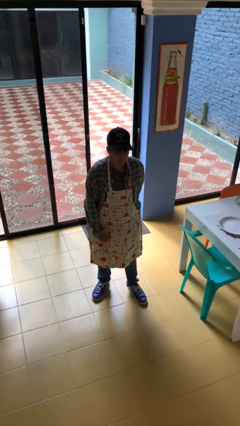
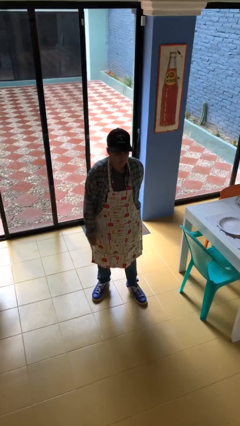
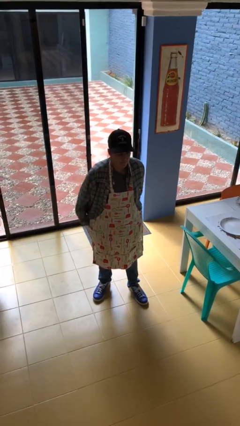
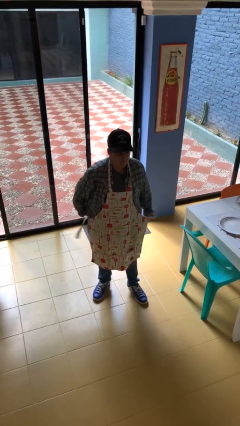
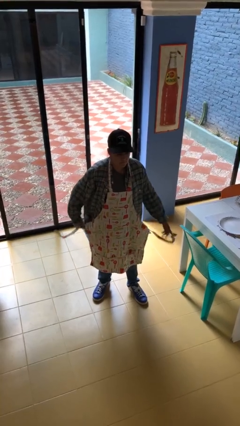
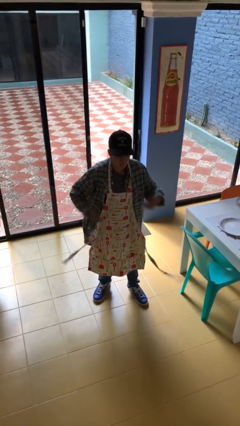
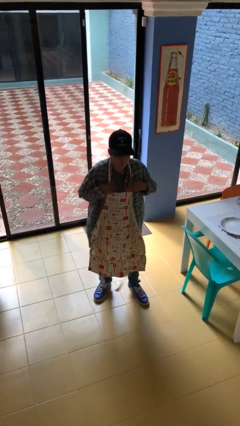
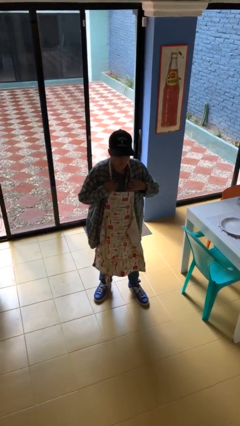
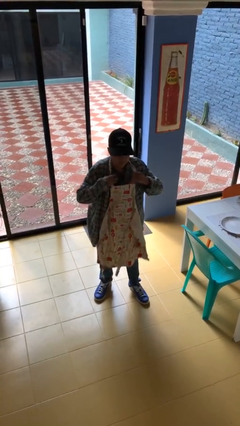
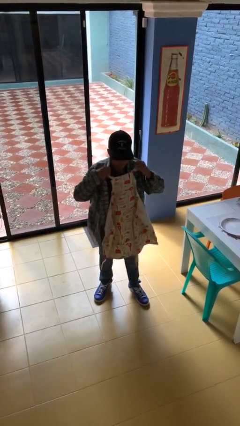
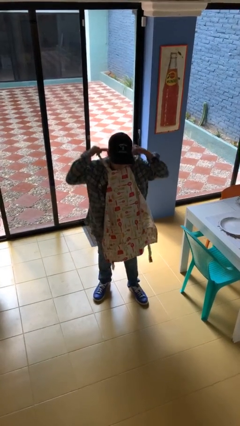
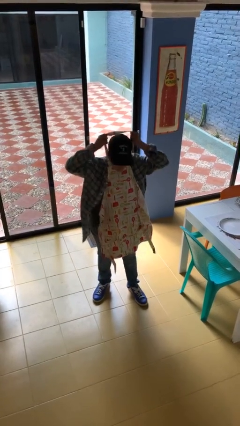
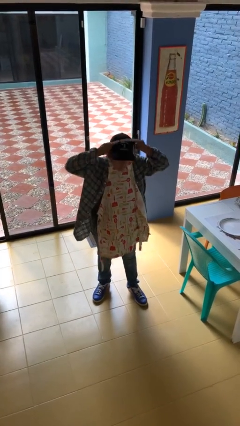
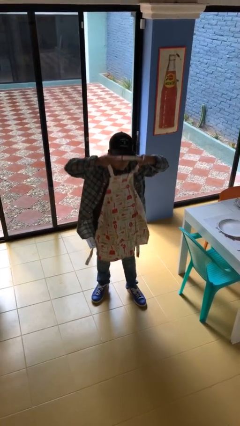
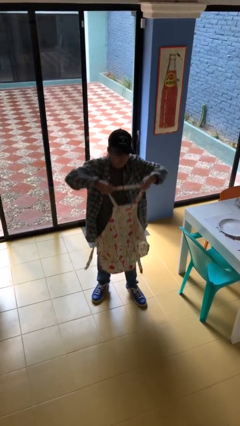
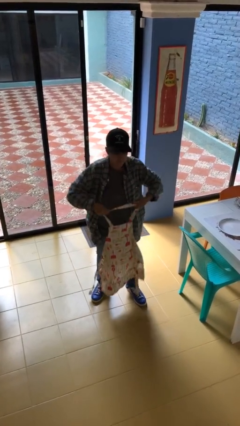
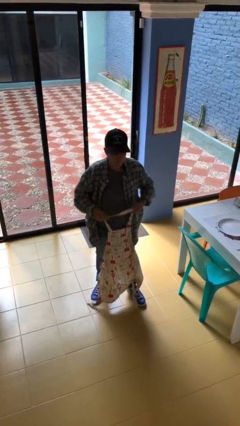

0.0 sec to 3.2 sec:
person takes off apron

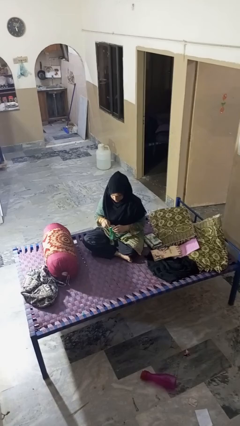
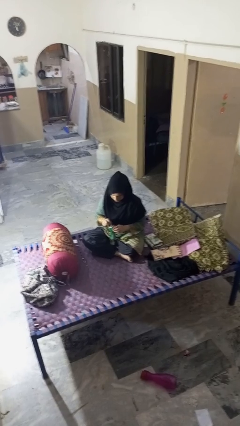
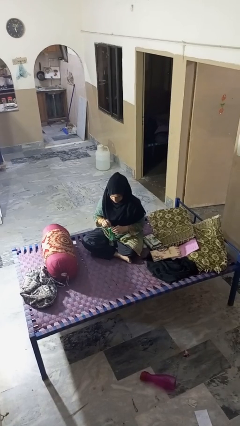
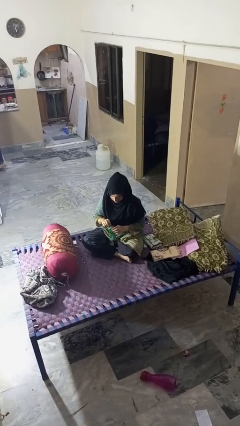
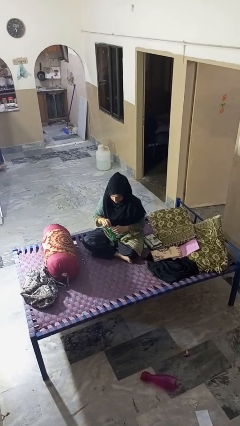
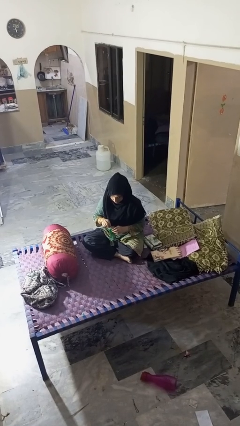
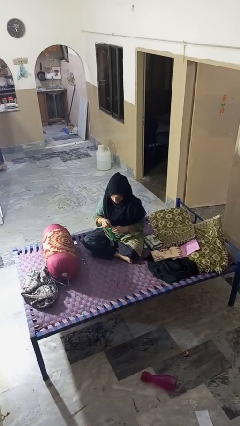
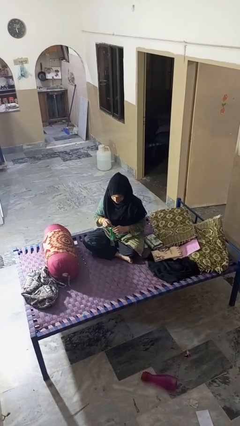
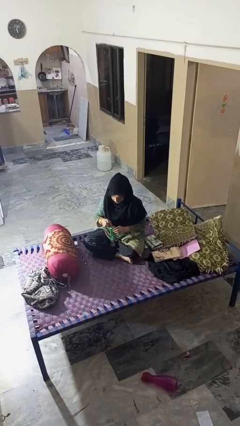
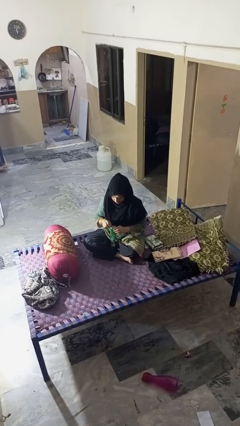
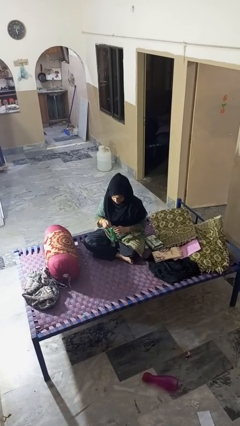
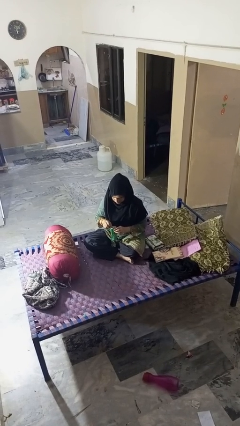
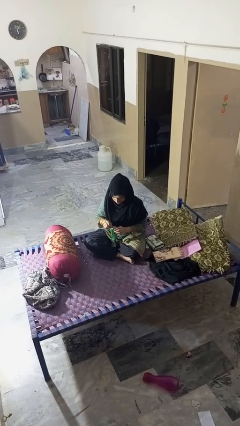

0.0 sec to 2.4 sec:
person opens can with can opener

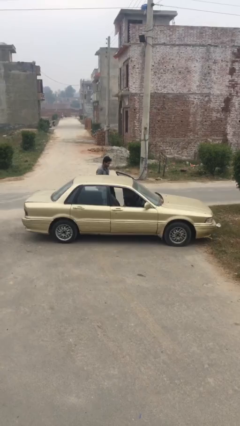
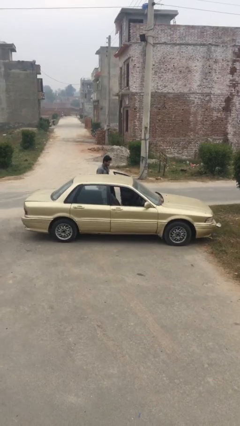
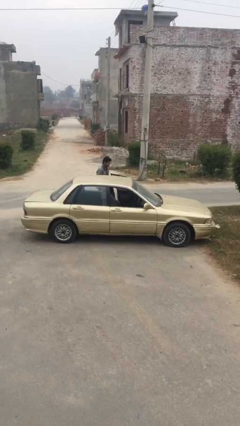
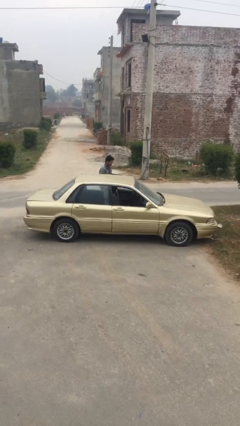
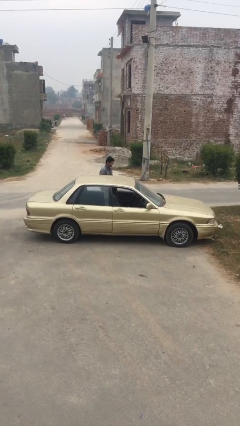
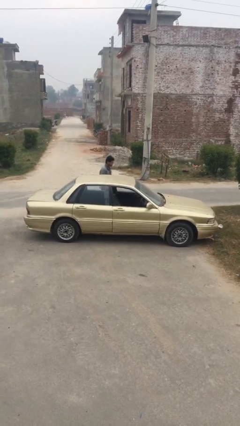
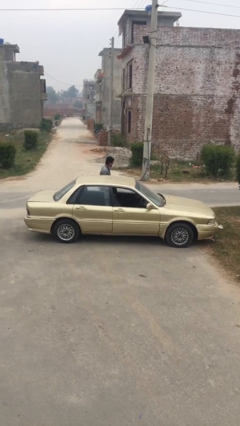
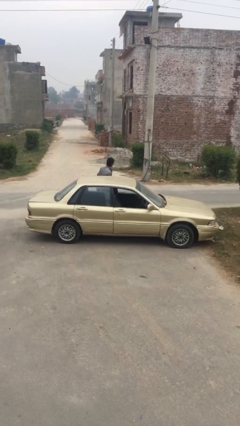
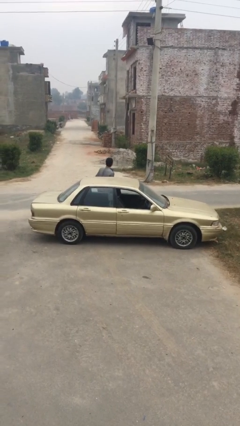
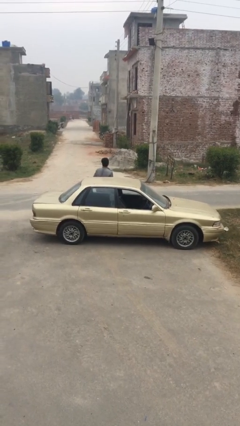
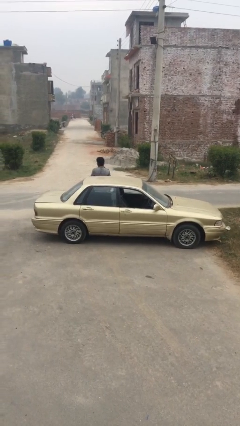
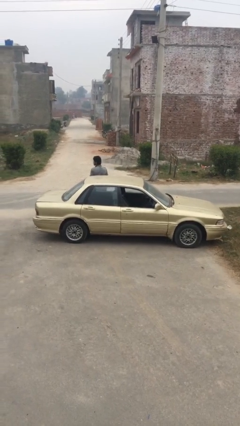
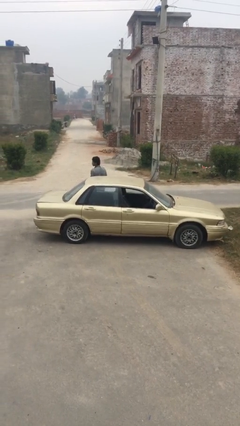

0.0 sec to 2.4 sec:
person closes car door

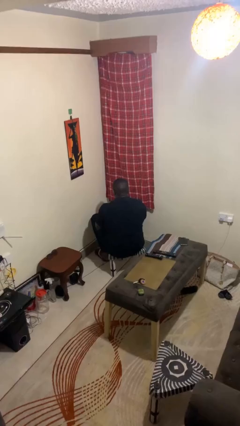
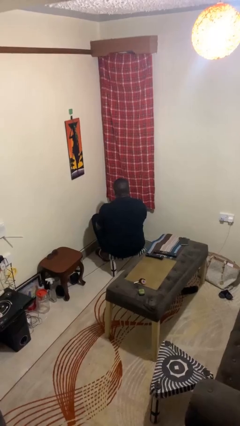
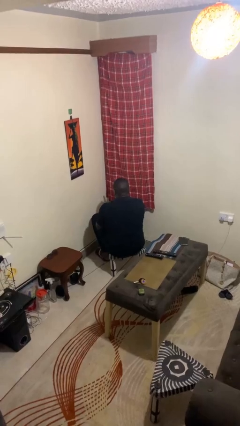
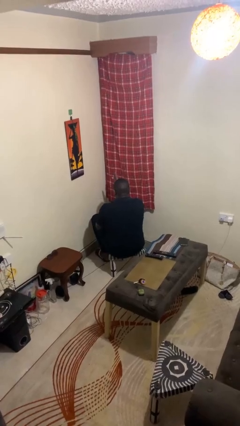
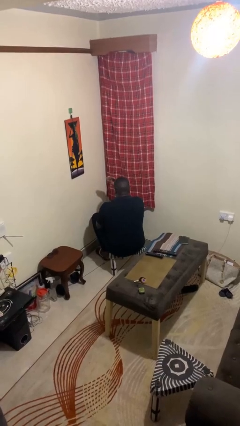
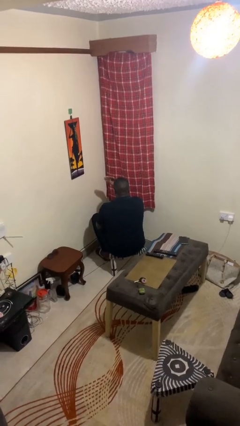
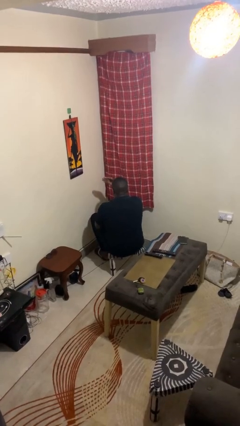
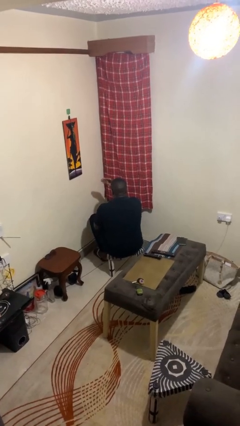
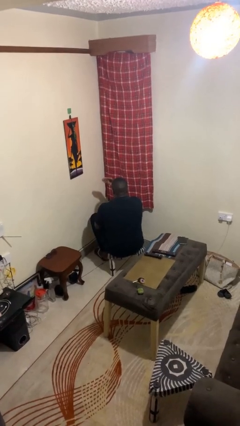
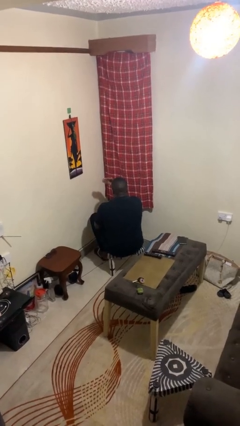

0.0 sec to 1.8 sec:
person gestures swipe left

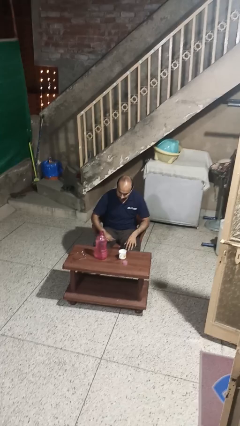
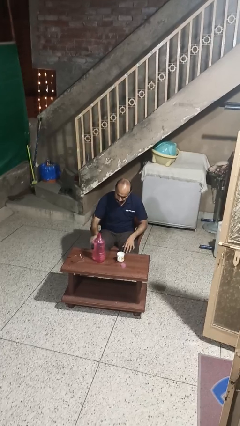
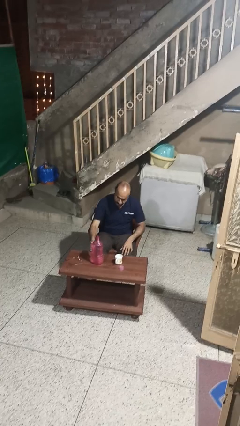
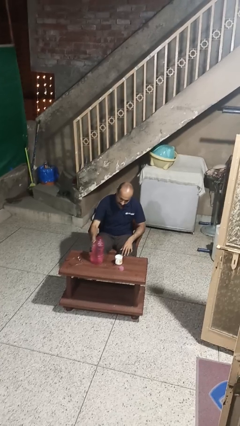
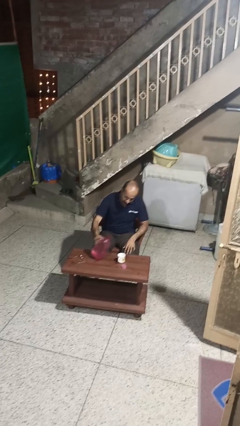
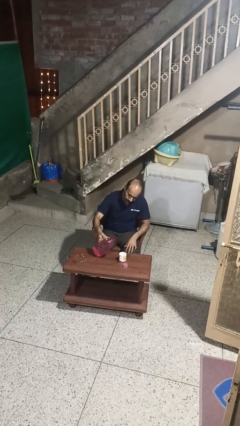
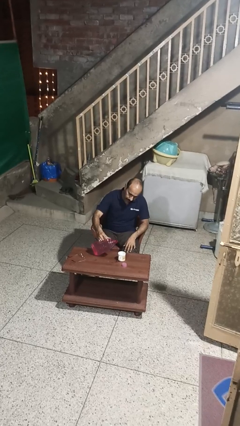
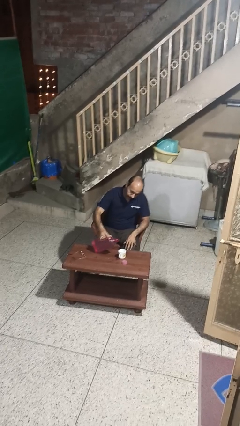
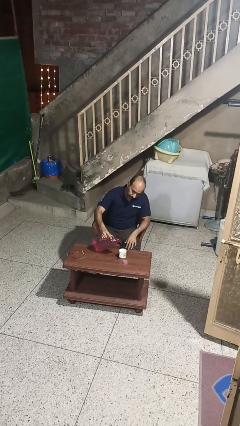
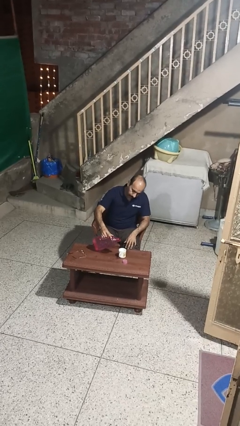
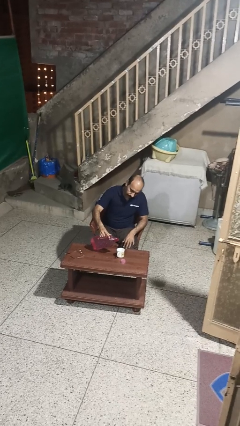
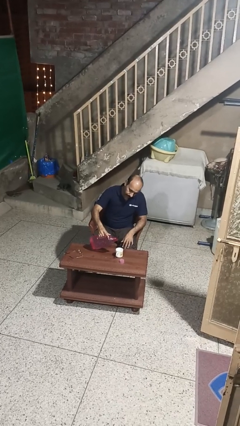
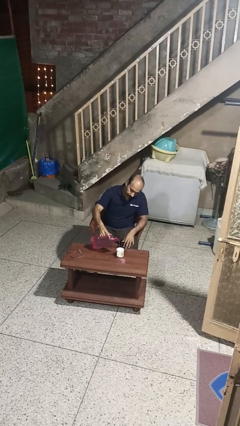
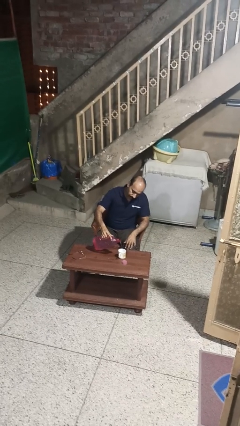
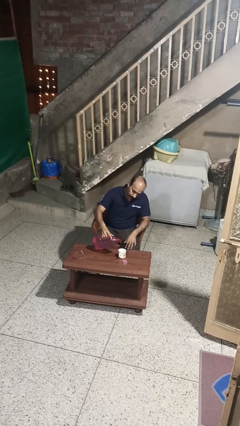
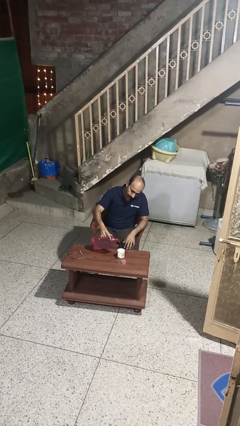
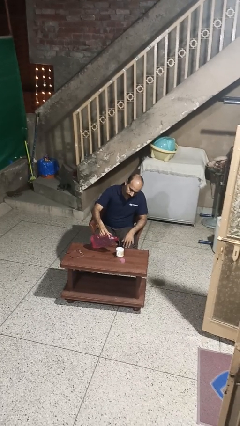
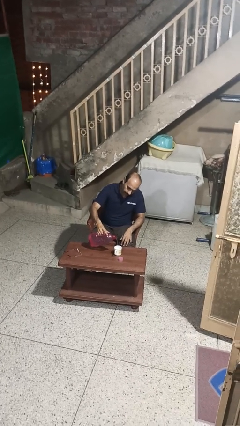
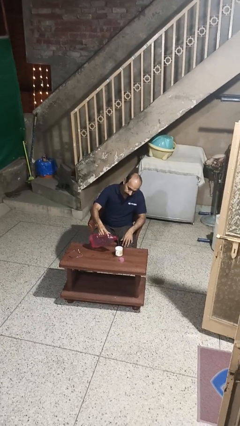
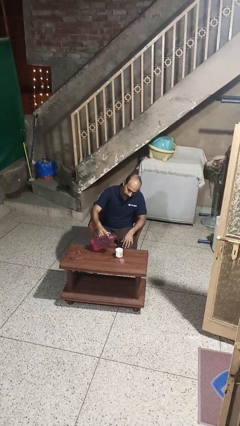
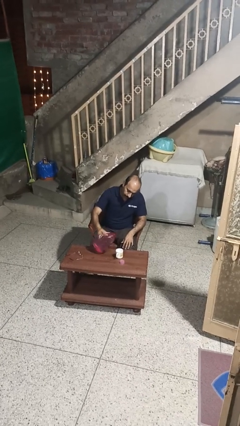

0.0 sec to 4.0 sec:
person pours liquid into cup

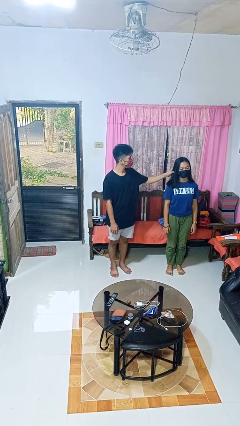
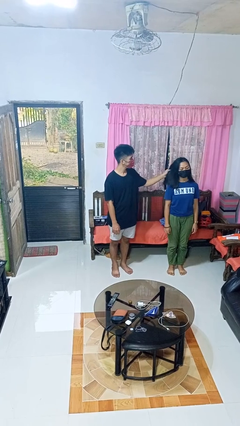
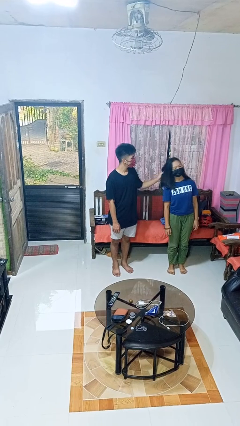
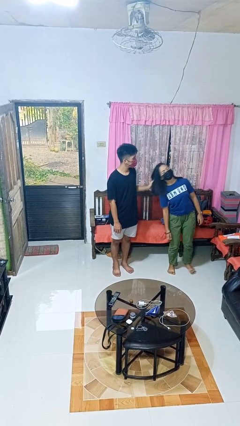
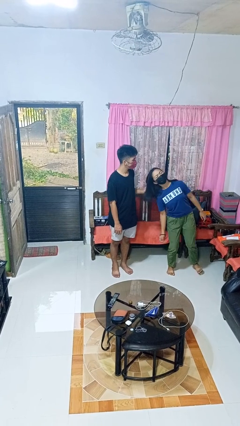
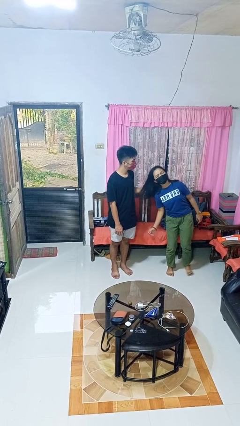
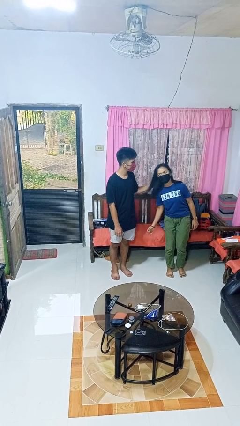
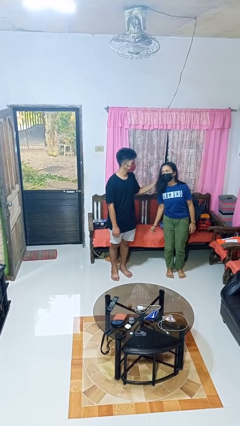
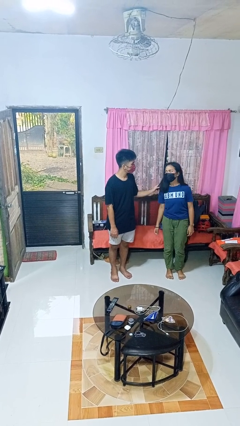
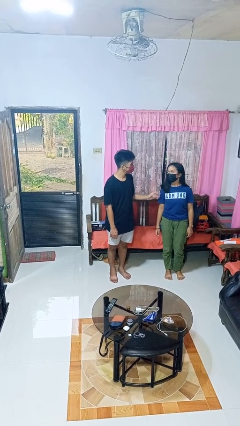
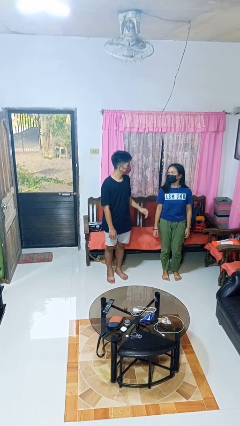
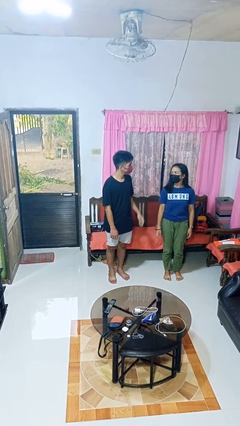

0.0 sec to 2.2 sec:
person grabs person by hair

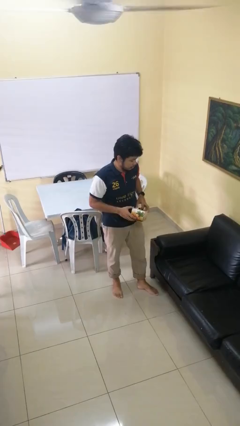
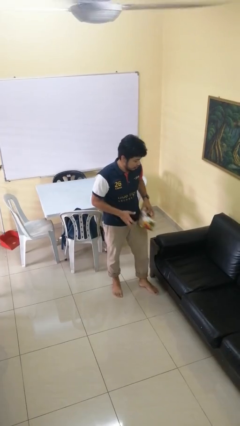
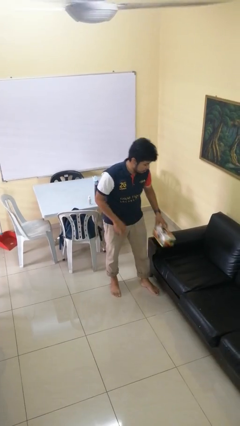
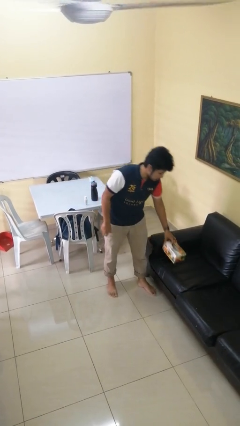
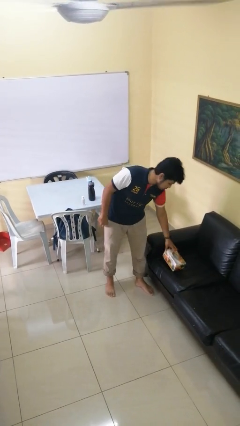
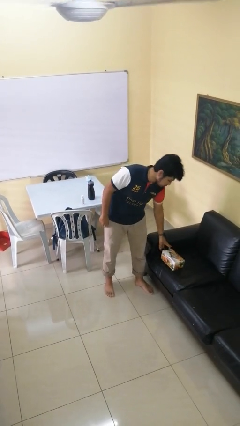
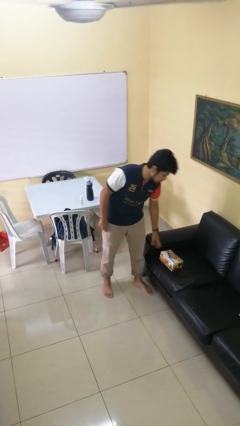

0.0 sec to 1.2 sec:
person puts down object on couch
